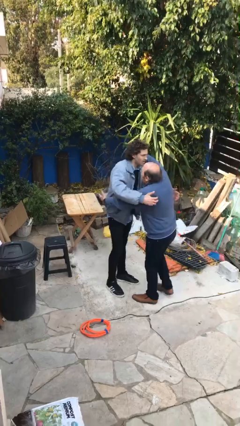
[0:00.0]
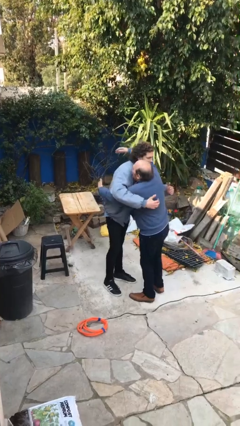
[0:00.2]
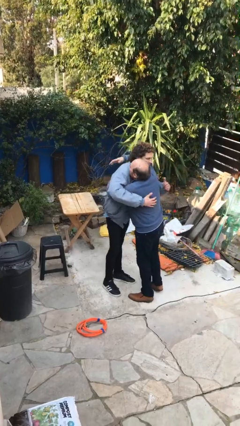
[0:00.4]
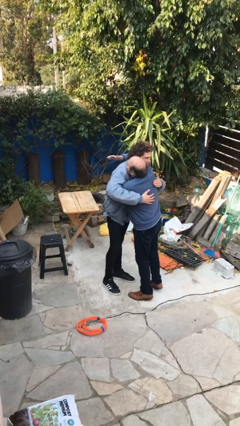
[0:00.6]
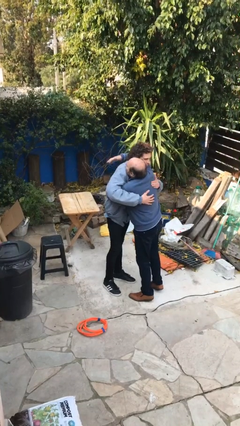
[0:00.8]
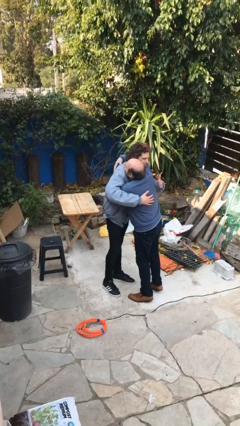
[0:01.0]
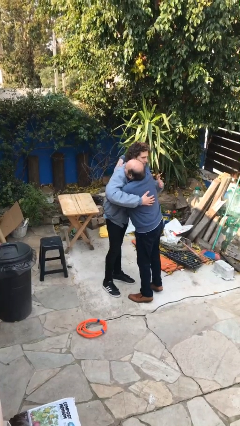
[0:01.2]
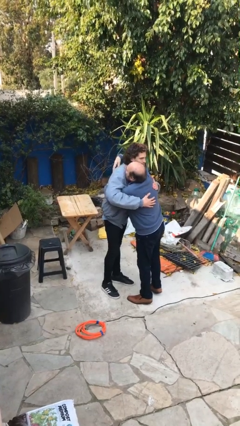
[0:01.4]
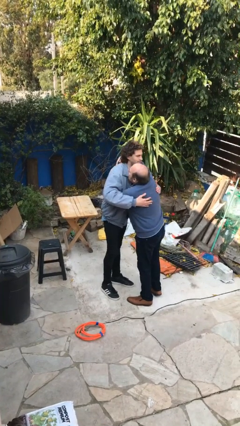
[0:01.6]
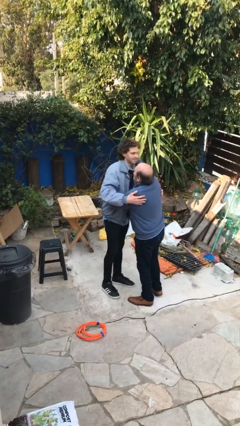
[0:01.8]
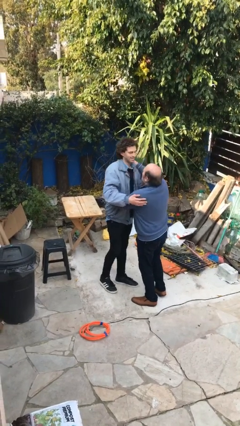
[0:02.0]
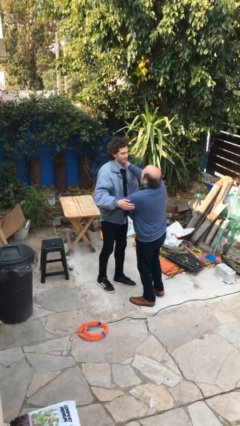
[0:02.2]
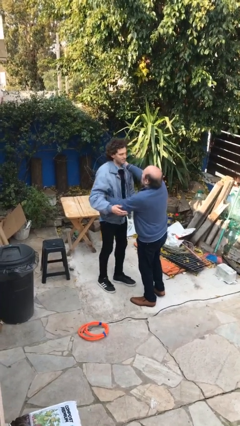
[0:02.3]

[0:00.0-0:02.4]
person embraces person

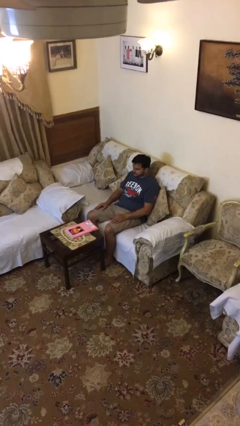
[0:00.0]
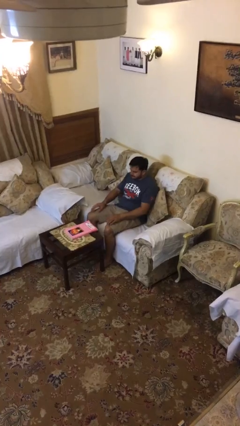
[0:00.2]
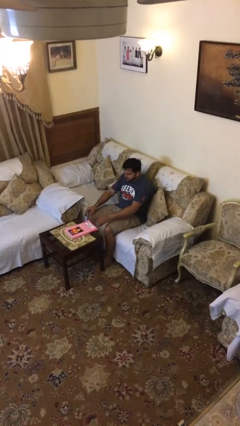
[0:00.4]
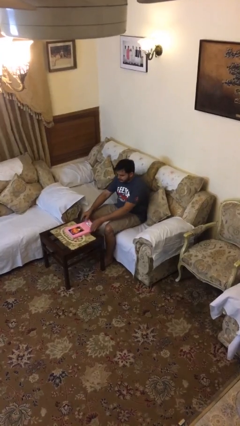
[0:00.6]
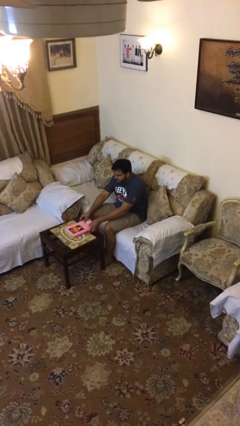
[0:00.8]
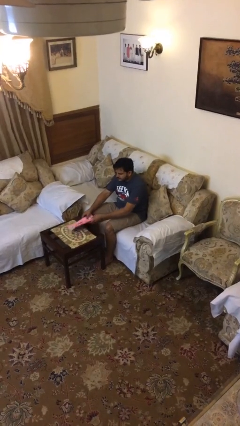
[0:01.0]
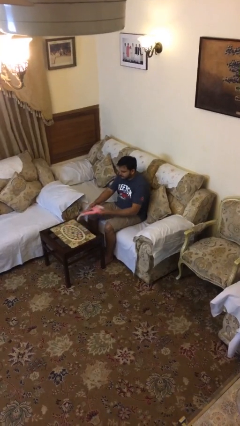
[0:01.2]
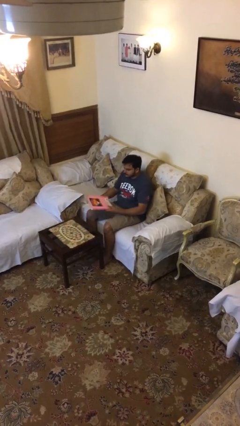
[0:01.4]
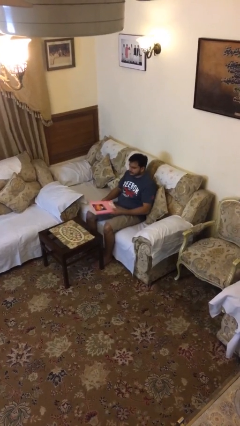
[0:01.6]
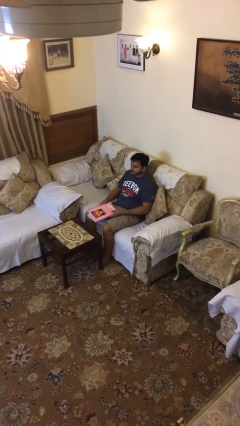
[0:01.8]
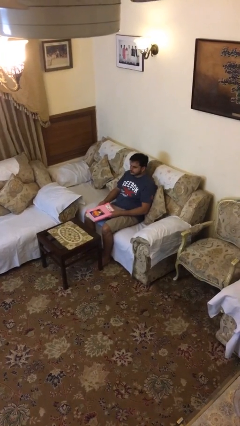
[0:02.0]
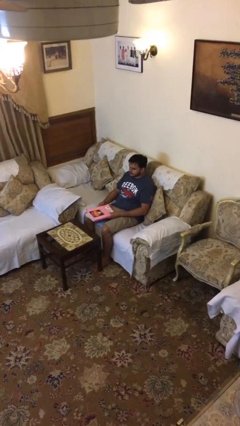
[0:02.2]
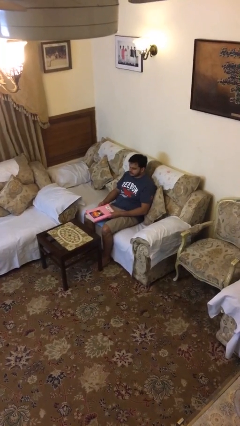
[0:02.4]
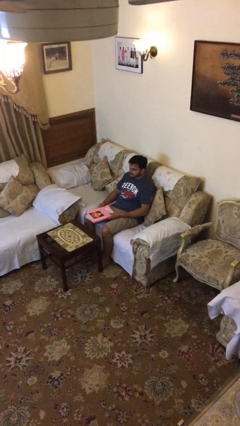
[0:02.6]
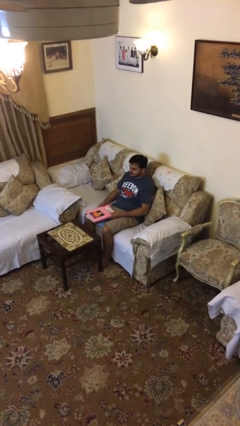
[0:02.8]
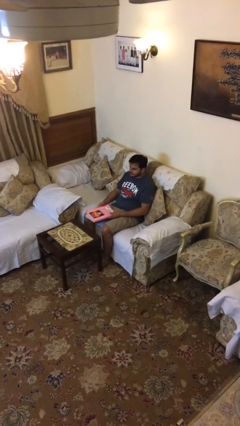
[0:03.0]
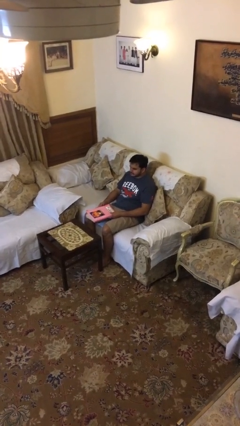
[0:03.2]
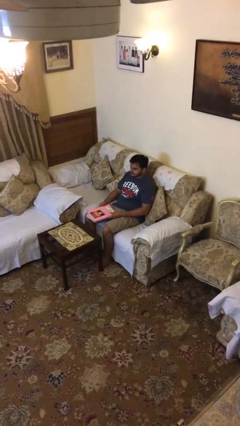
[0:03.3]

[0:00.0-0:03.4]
person picks up object from table

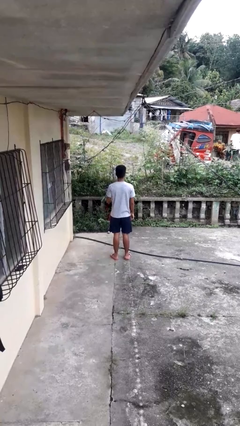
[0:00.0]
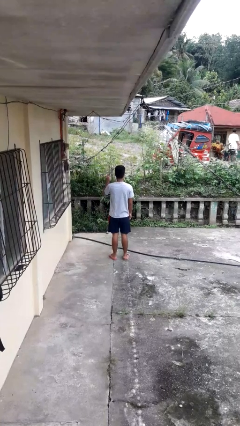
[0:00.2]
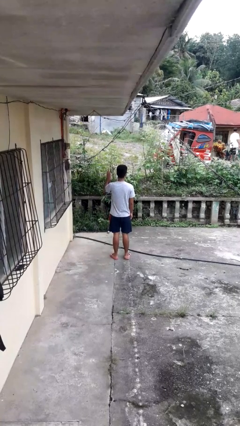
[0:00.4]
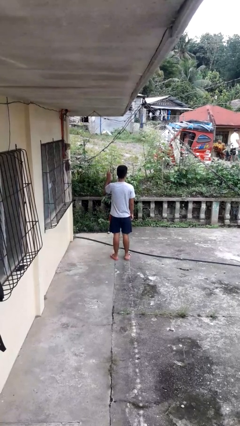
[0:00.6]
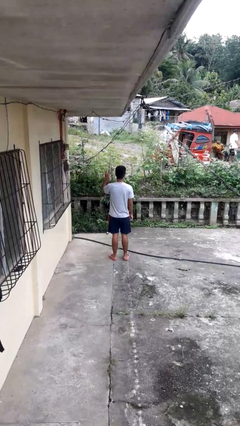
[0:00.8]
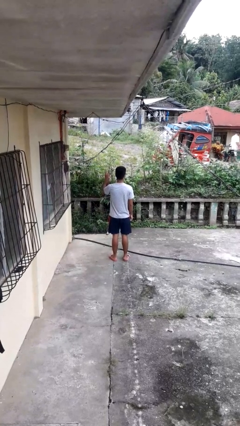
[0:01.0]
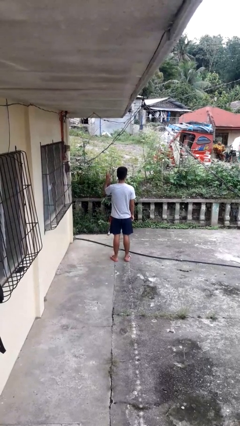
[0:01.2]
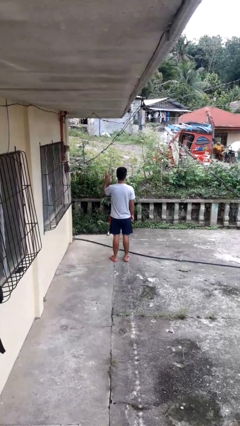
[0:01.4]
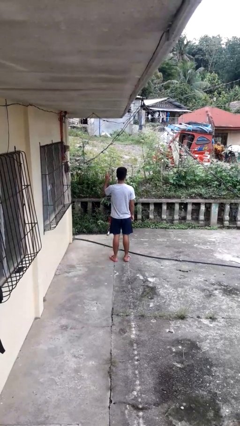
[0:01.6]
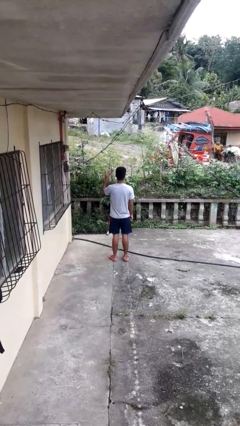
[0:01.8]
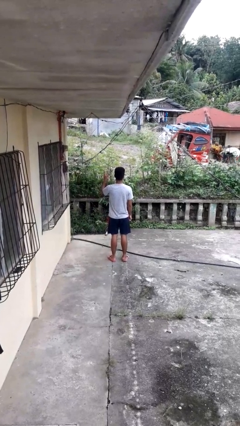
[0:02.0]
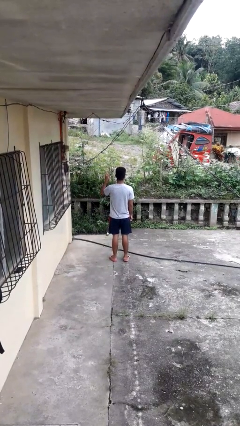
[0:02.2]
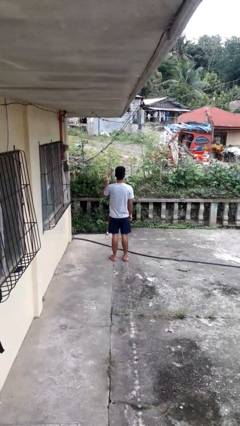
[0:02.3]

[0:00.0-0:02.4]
person gestures peace

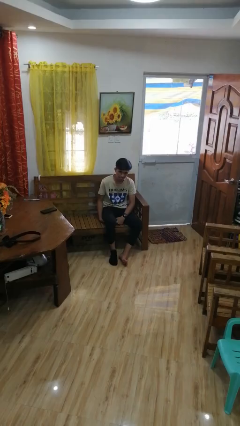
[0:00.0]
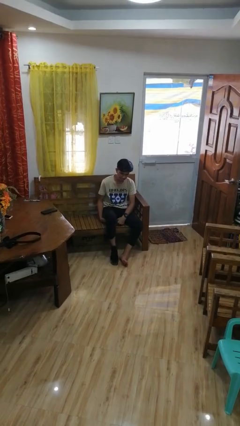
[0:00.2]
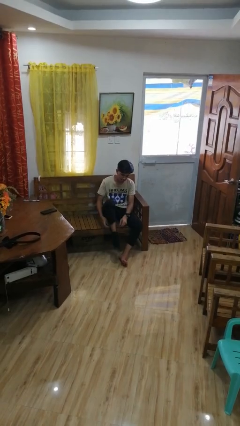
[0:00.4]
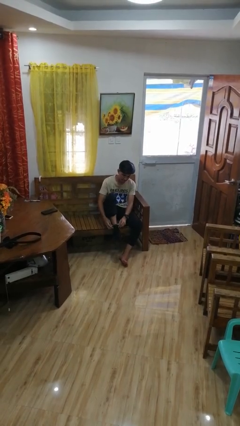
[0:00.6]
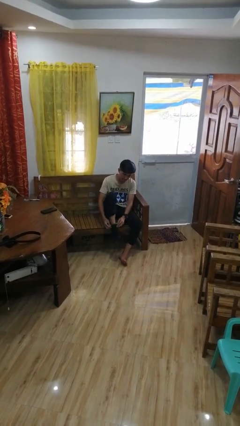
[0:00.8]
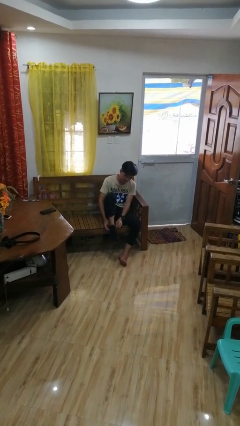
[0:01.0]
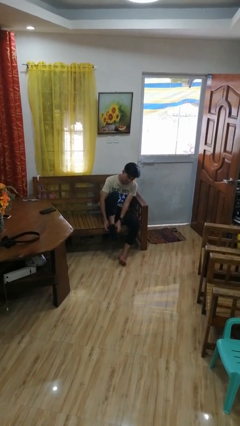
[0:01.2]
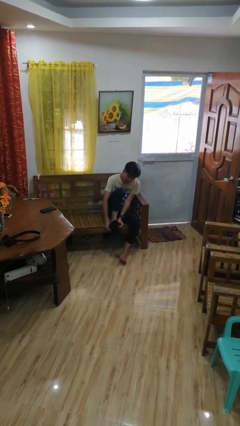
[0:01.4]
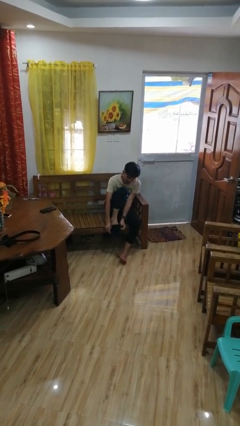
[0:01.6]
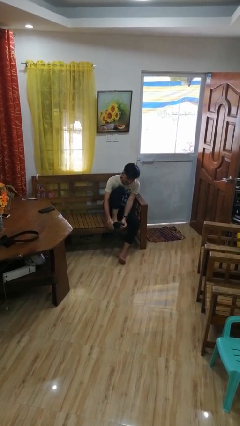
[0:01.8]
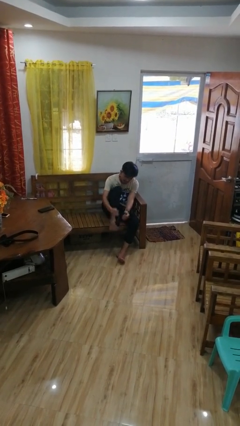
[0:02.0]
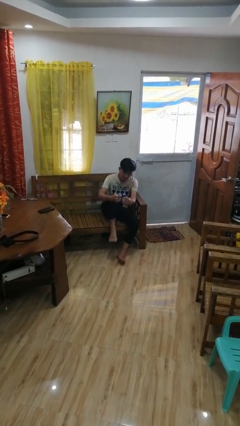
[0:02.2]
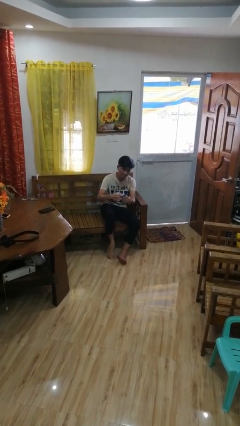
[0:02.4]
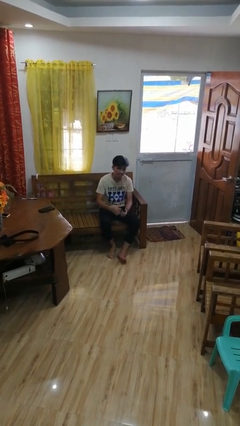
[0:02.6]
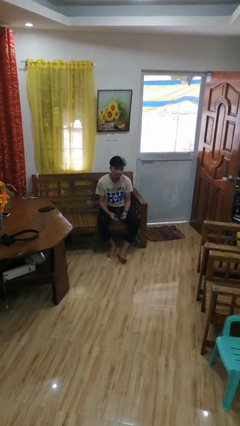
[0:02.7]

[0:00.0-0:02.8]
person takes off socks

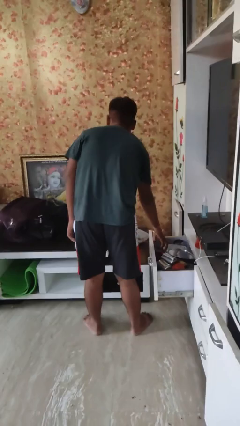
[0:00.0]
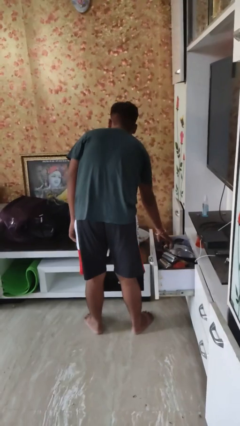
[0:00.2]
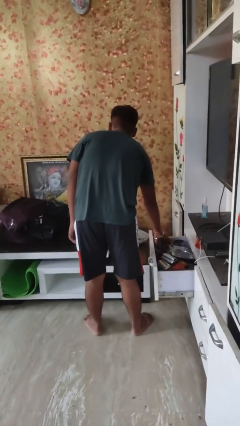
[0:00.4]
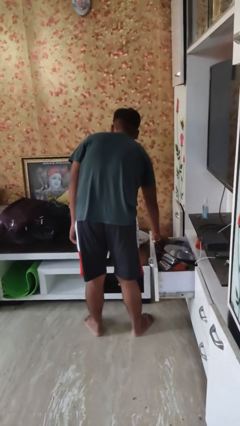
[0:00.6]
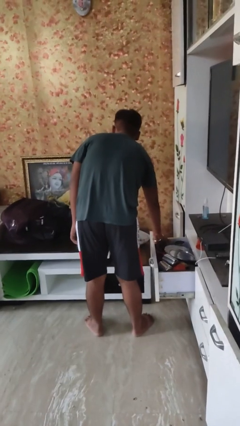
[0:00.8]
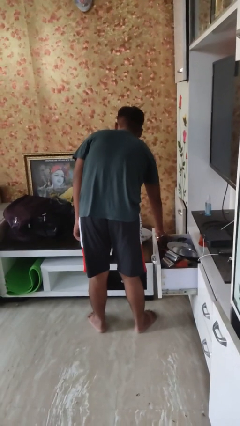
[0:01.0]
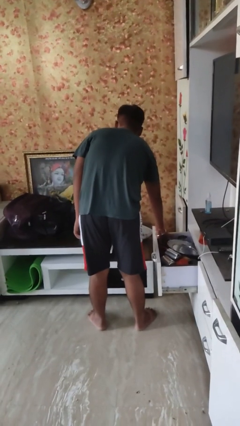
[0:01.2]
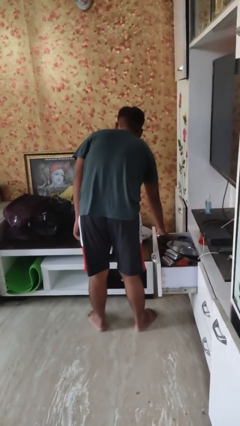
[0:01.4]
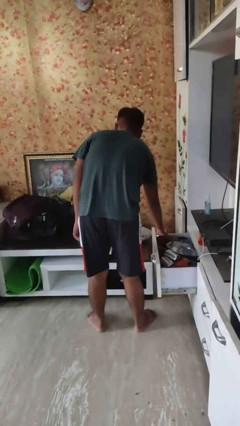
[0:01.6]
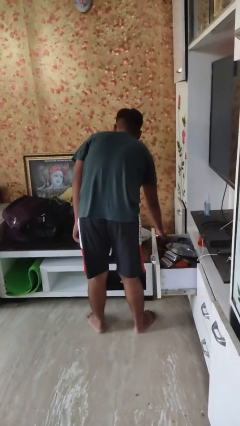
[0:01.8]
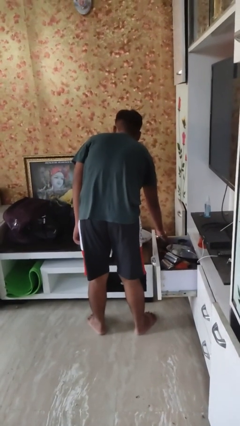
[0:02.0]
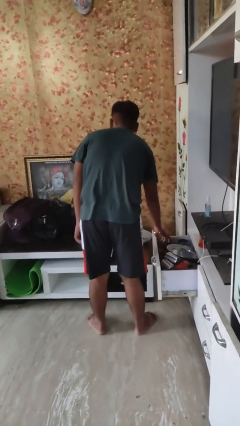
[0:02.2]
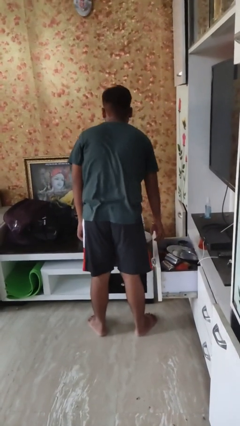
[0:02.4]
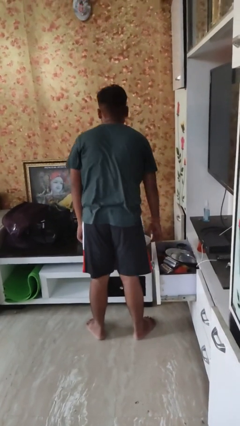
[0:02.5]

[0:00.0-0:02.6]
person searches in kitchen drawer

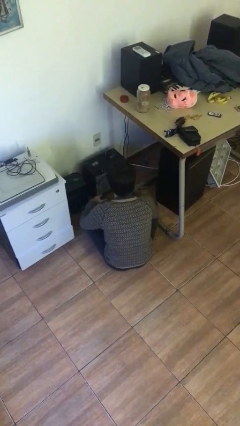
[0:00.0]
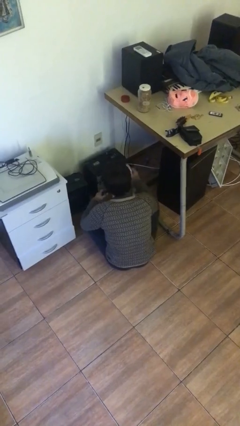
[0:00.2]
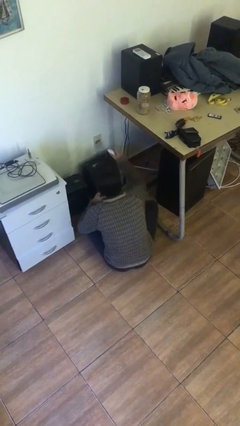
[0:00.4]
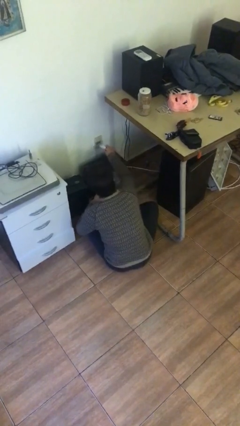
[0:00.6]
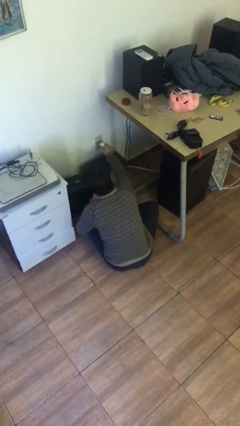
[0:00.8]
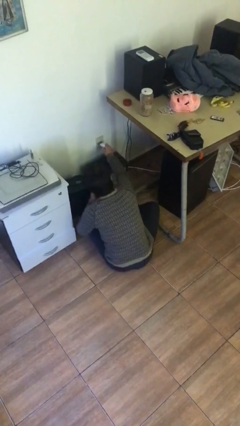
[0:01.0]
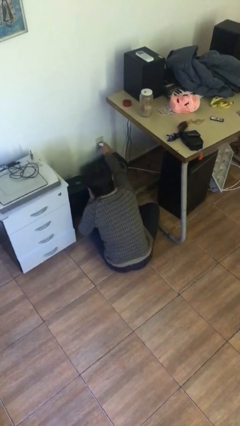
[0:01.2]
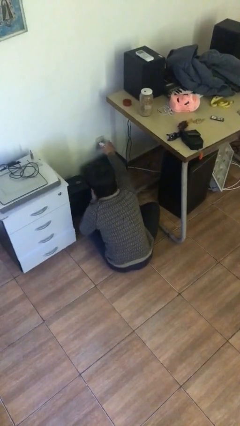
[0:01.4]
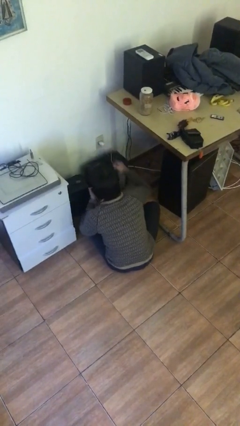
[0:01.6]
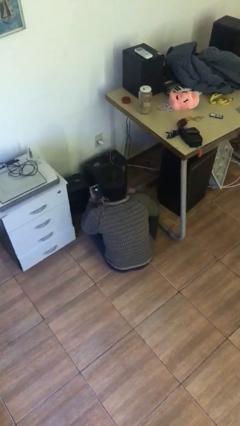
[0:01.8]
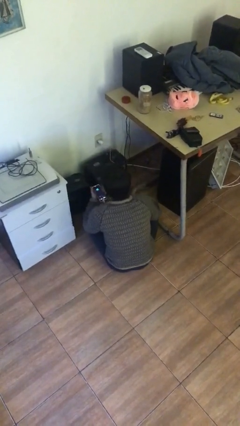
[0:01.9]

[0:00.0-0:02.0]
person plugs into electrical socket

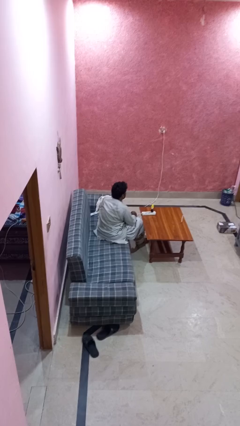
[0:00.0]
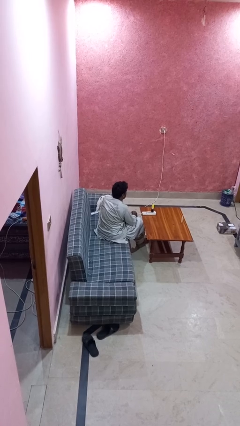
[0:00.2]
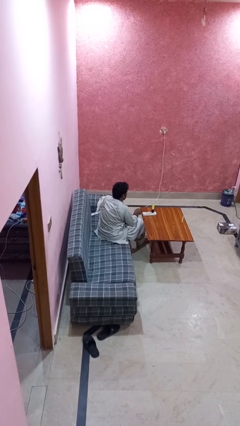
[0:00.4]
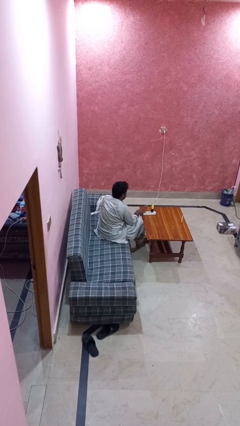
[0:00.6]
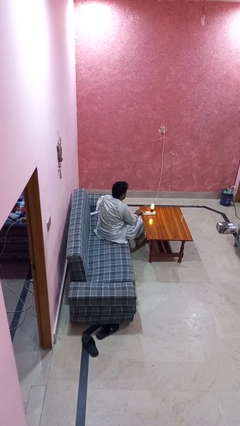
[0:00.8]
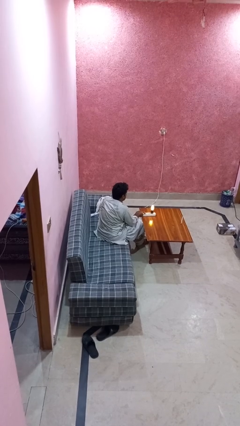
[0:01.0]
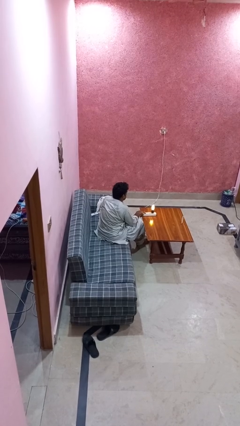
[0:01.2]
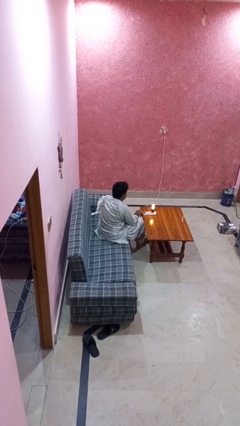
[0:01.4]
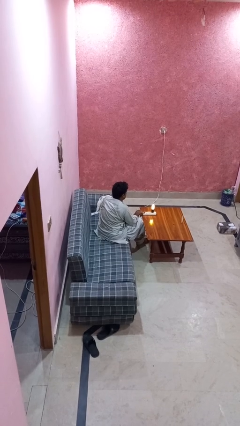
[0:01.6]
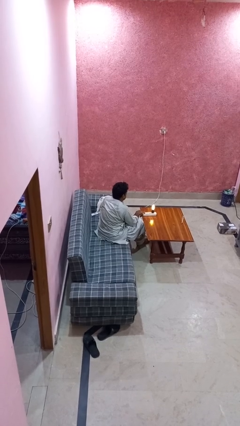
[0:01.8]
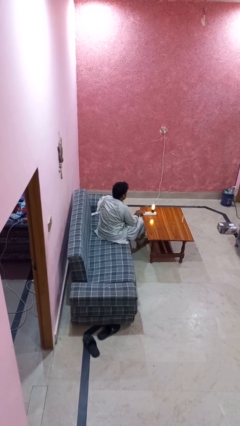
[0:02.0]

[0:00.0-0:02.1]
person turns on lamp
